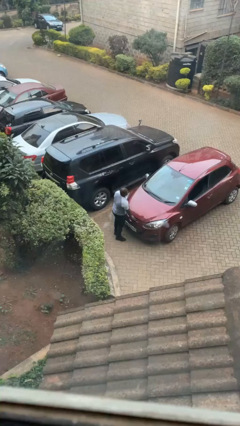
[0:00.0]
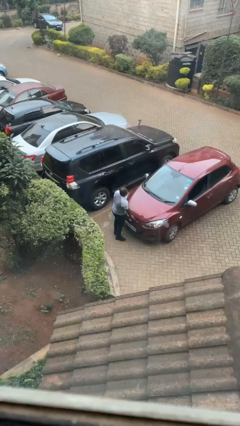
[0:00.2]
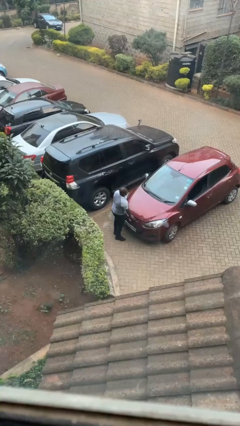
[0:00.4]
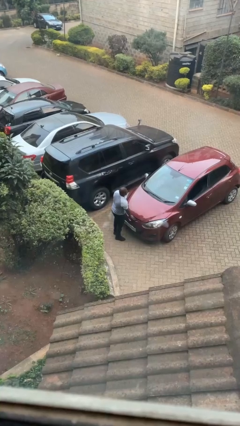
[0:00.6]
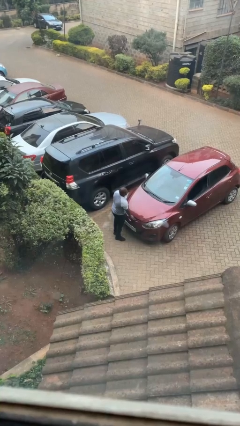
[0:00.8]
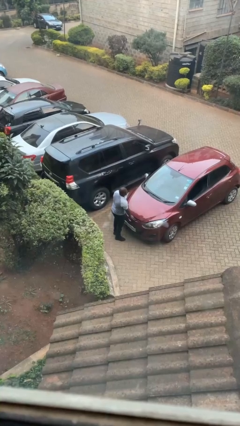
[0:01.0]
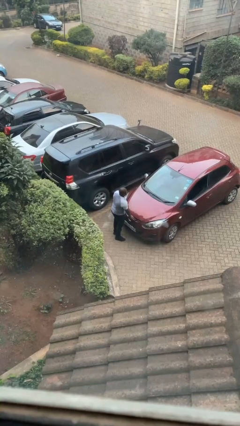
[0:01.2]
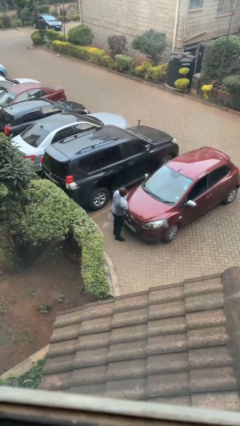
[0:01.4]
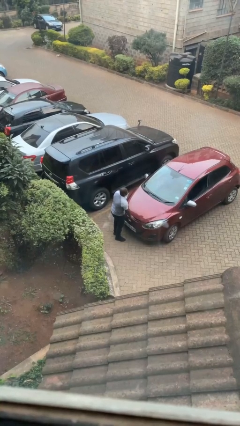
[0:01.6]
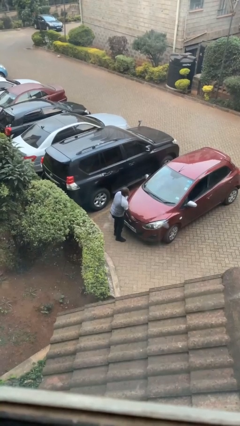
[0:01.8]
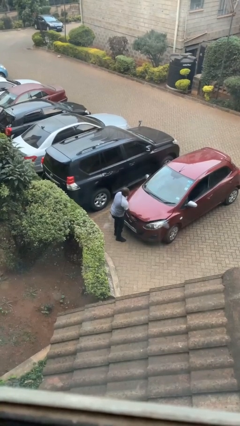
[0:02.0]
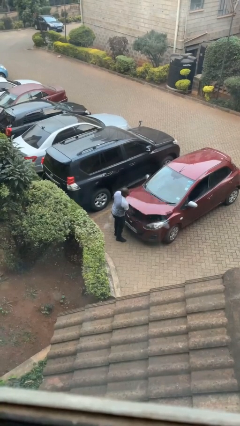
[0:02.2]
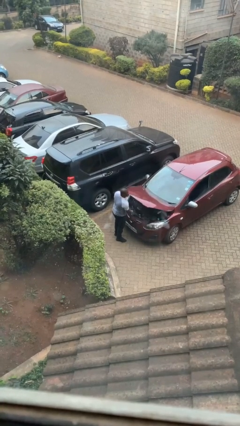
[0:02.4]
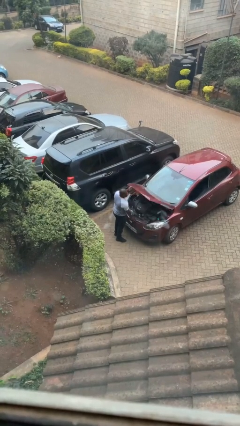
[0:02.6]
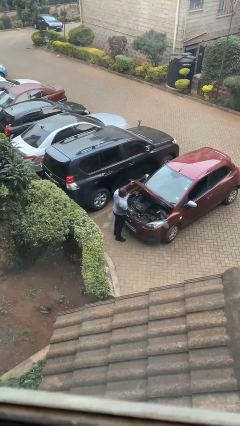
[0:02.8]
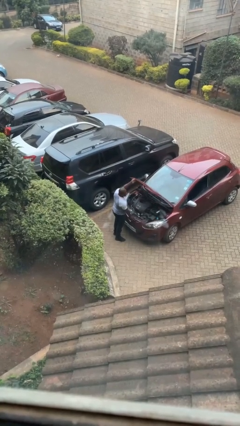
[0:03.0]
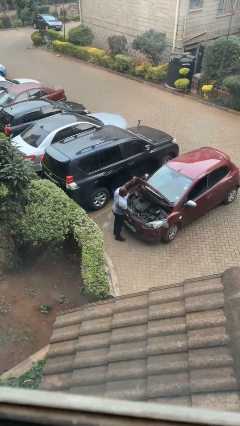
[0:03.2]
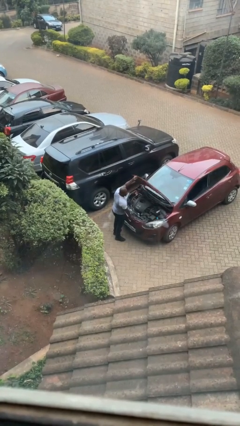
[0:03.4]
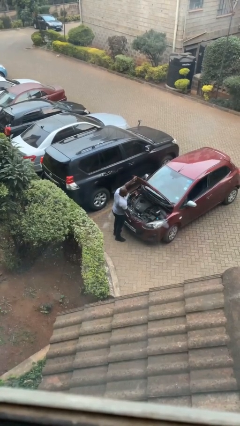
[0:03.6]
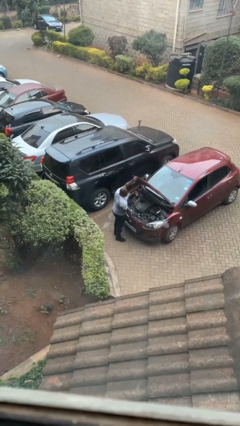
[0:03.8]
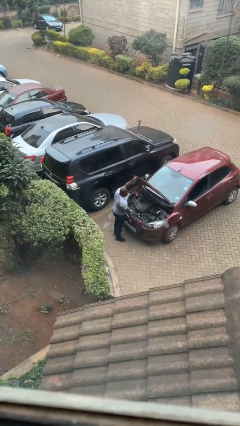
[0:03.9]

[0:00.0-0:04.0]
person opens car hood

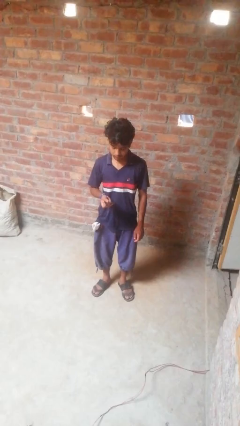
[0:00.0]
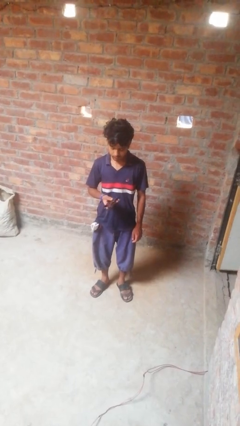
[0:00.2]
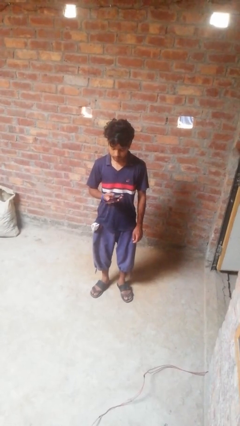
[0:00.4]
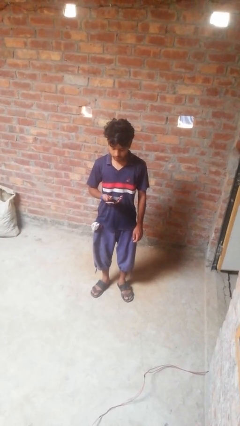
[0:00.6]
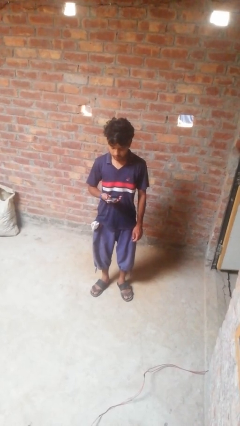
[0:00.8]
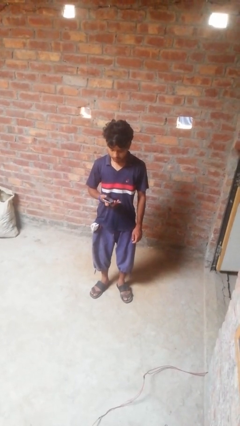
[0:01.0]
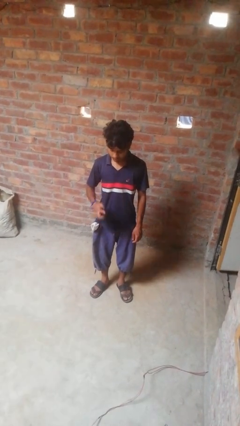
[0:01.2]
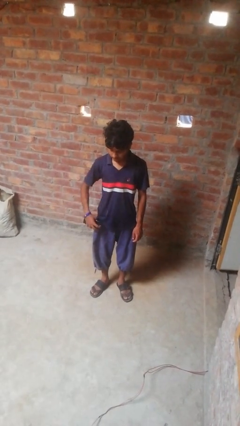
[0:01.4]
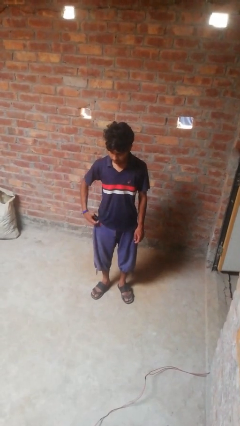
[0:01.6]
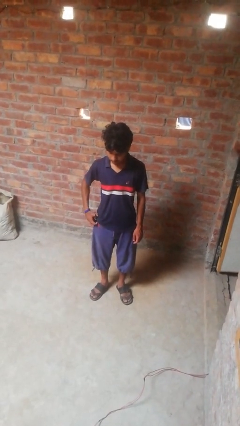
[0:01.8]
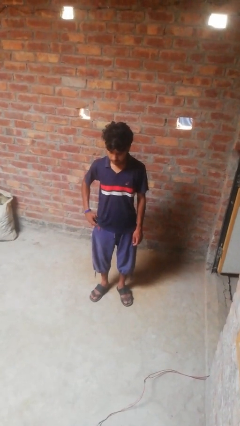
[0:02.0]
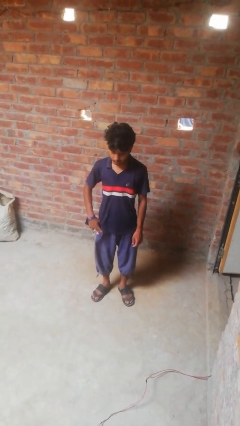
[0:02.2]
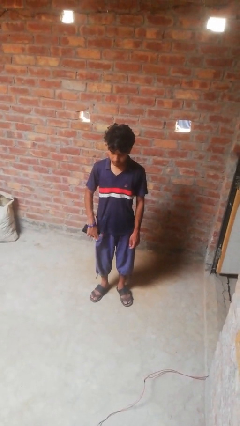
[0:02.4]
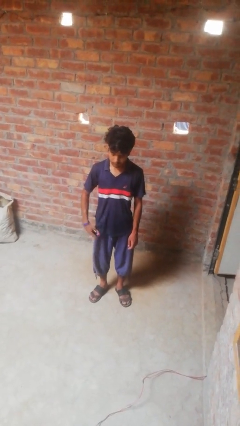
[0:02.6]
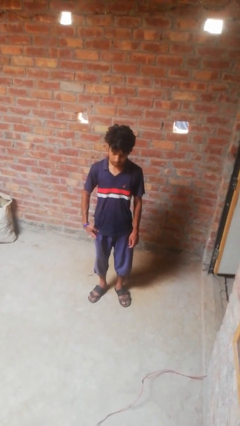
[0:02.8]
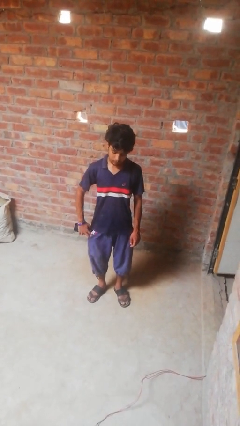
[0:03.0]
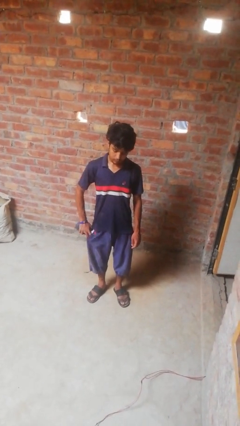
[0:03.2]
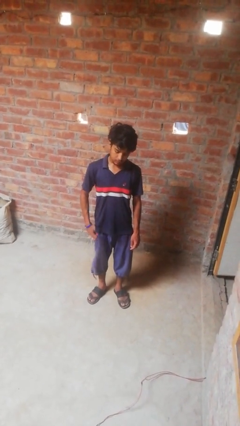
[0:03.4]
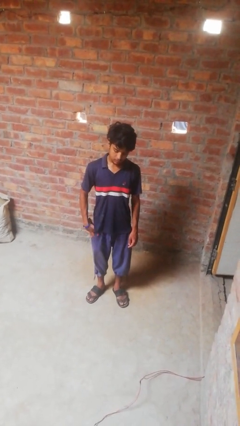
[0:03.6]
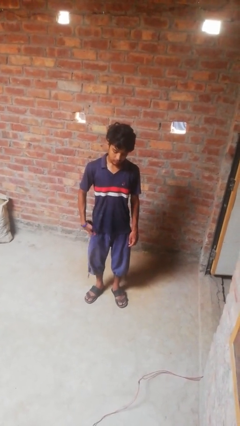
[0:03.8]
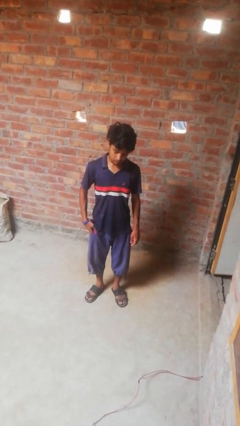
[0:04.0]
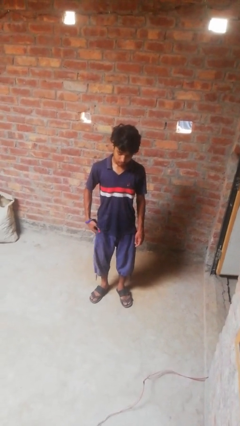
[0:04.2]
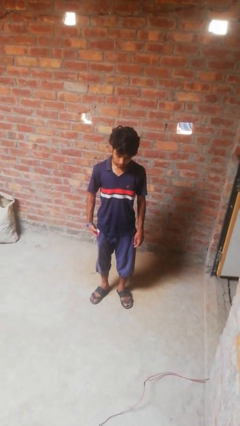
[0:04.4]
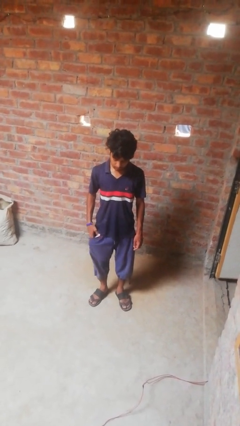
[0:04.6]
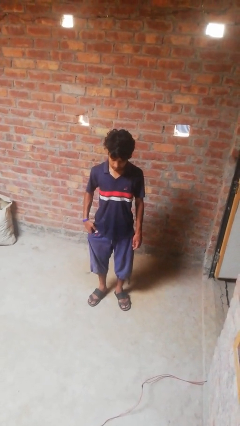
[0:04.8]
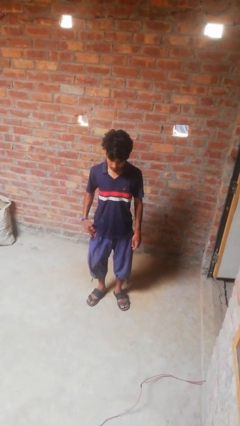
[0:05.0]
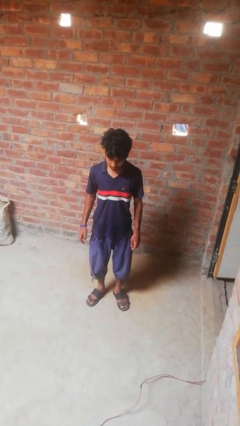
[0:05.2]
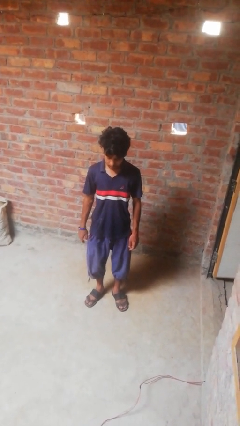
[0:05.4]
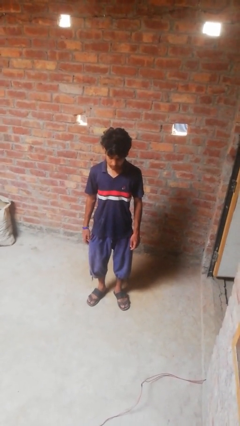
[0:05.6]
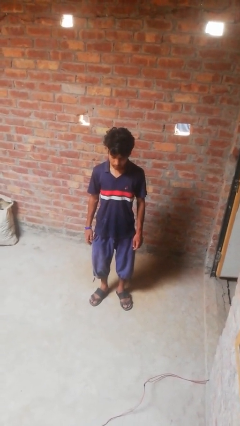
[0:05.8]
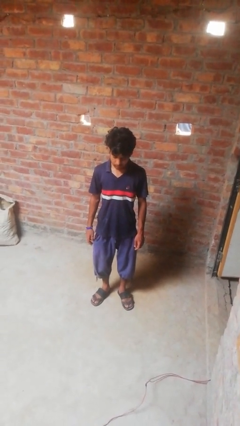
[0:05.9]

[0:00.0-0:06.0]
person puts phone into pocket

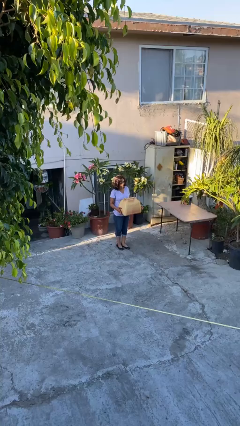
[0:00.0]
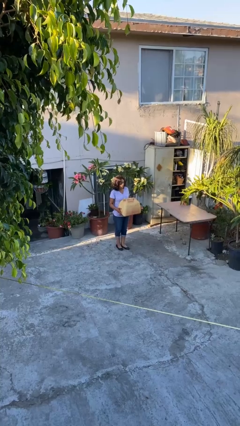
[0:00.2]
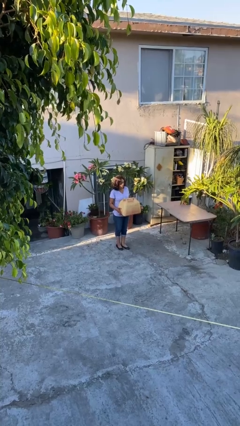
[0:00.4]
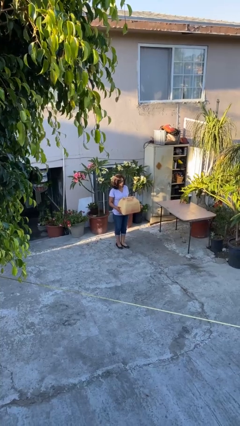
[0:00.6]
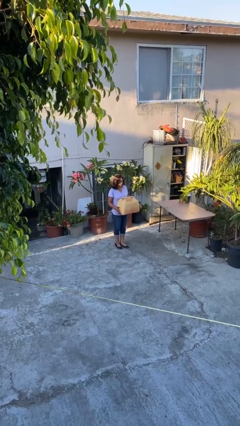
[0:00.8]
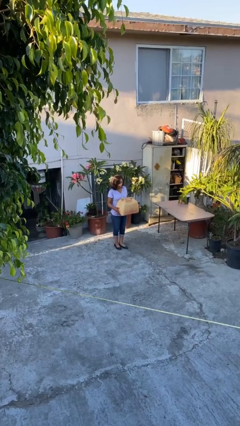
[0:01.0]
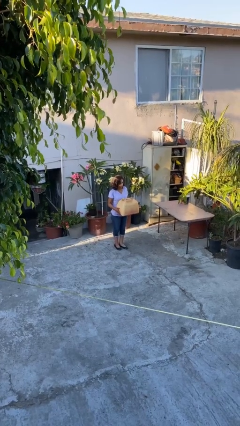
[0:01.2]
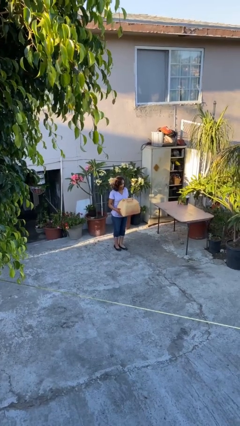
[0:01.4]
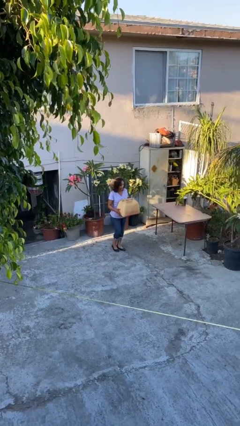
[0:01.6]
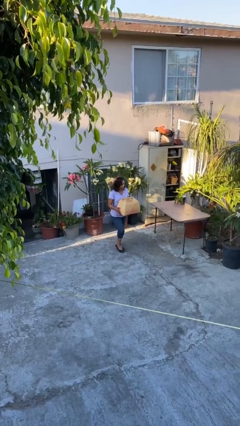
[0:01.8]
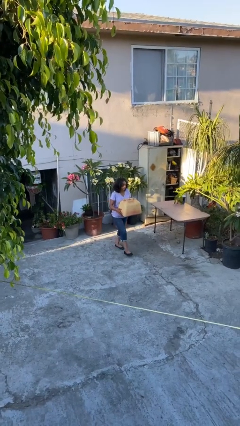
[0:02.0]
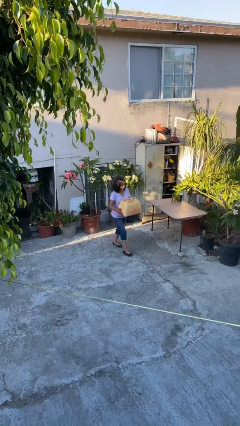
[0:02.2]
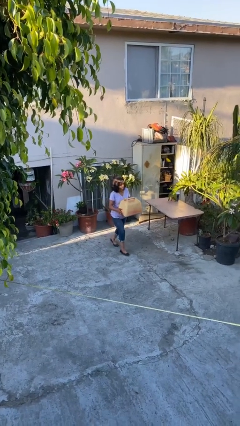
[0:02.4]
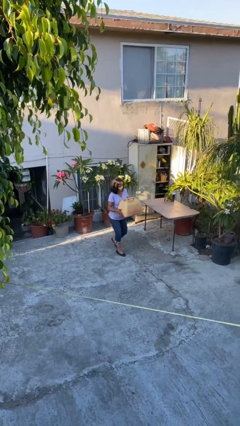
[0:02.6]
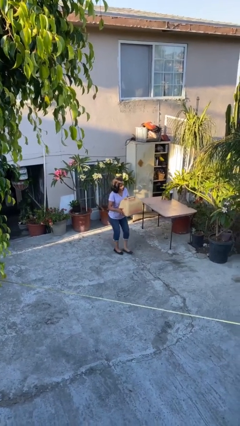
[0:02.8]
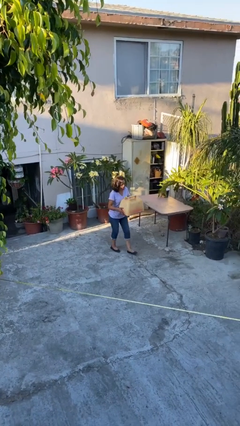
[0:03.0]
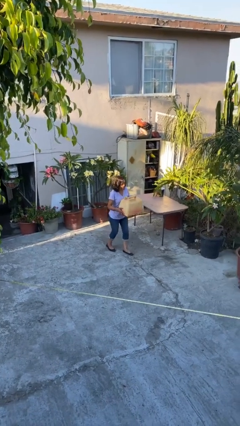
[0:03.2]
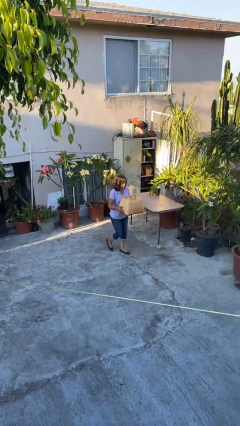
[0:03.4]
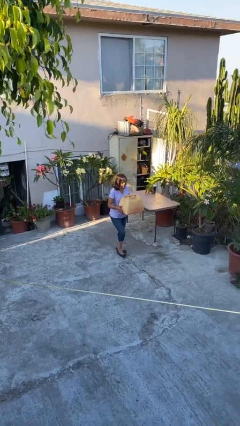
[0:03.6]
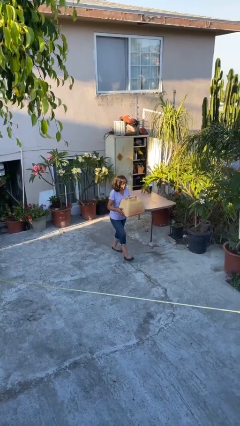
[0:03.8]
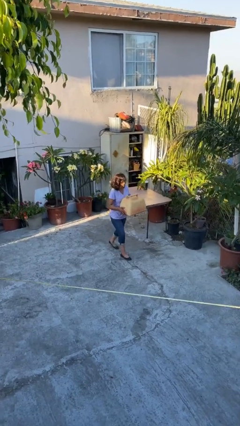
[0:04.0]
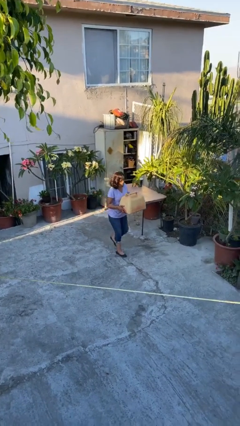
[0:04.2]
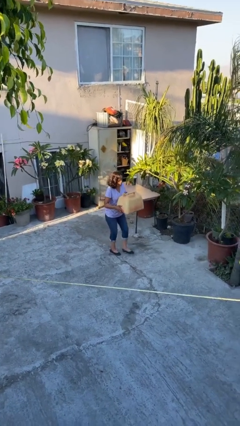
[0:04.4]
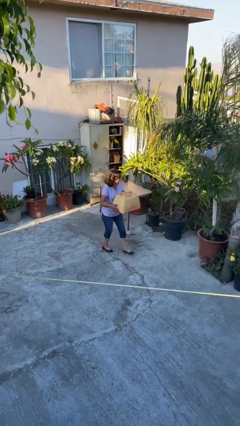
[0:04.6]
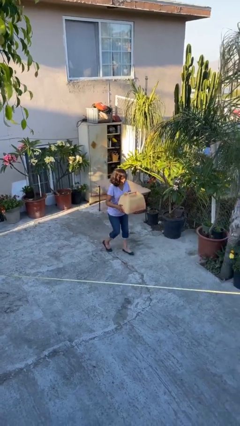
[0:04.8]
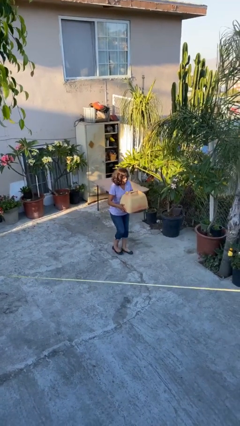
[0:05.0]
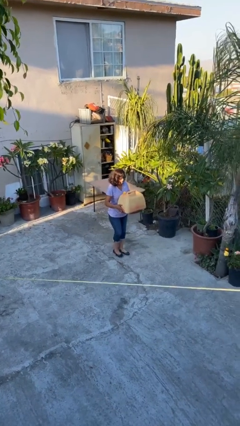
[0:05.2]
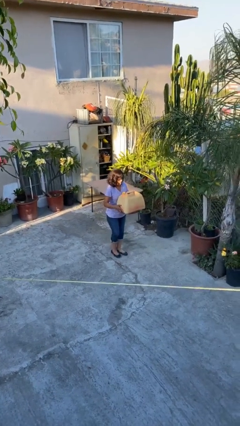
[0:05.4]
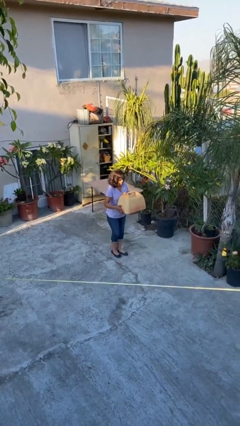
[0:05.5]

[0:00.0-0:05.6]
person carries heavy object

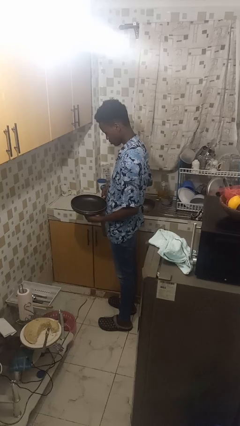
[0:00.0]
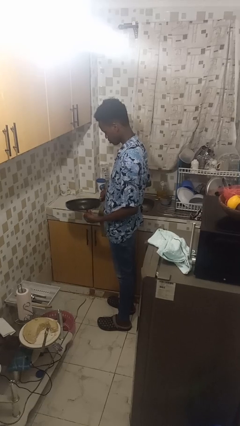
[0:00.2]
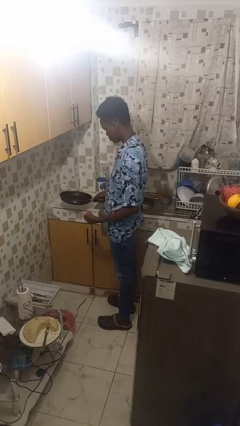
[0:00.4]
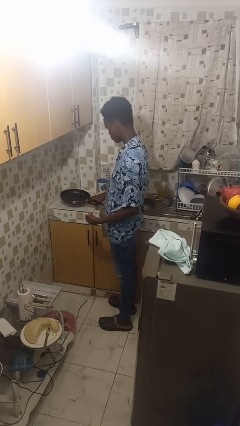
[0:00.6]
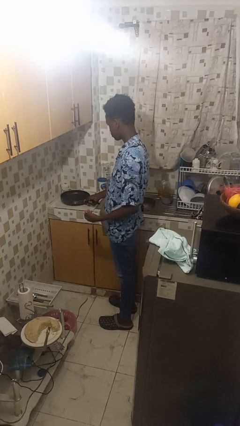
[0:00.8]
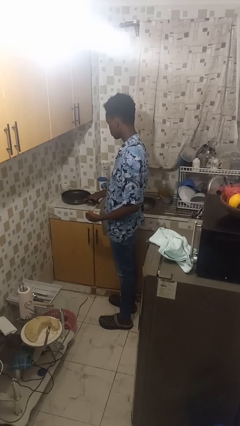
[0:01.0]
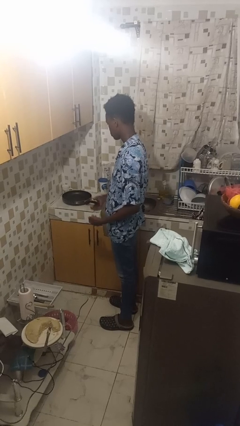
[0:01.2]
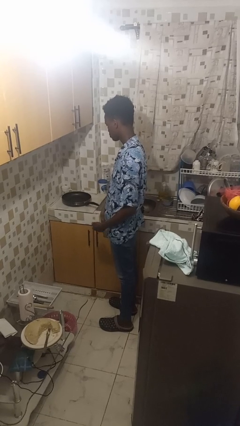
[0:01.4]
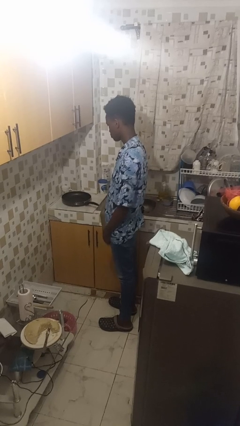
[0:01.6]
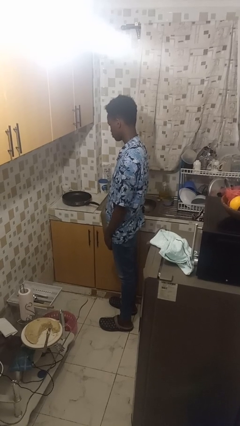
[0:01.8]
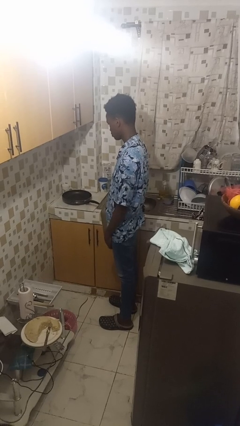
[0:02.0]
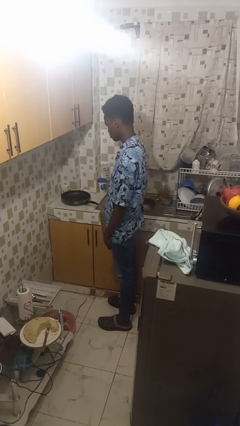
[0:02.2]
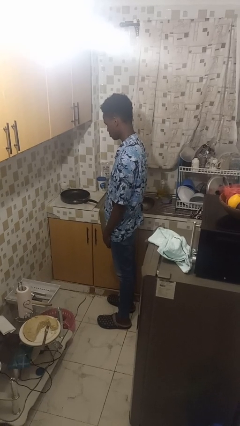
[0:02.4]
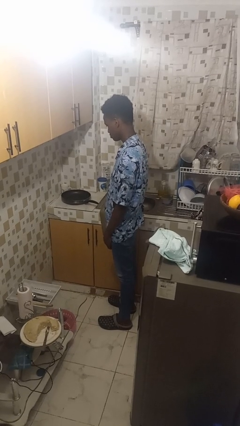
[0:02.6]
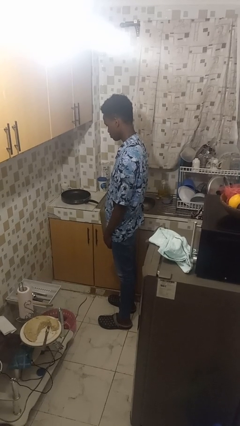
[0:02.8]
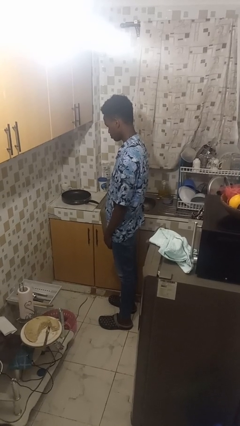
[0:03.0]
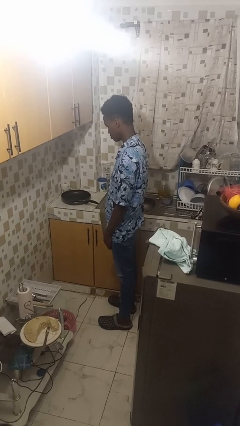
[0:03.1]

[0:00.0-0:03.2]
person puts down object on countertop
